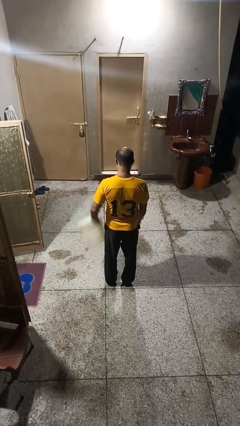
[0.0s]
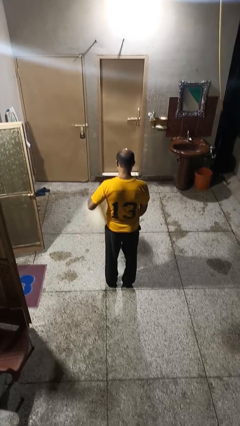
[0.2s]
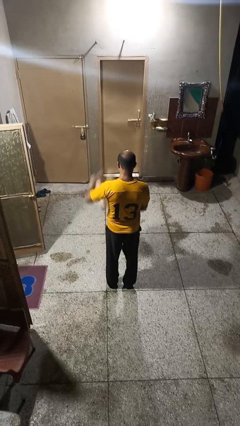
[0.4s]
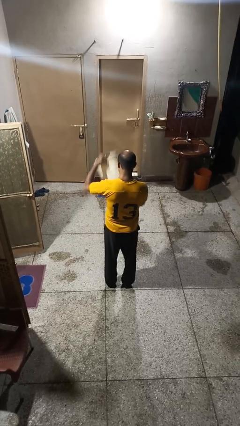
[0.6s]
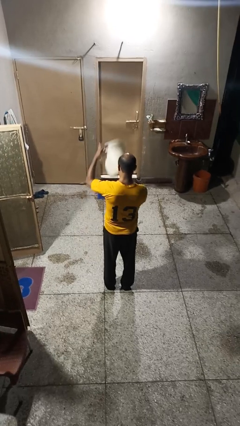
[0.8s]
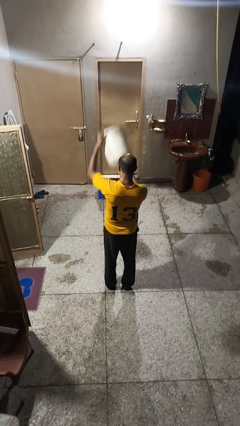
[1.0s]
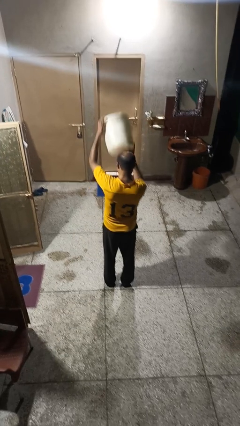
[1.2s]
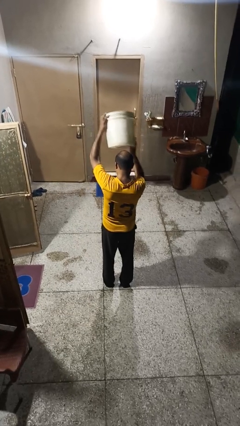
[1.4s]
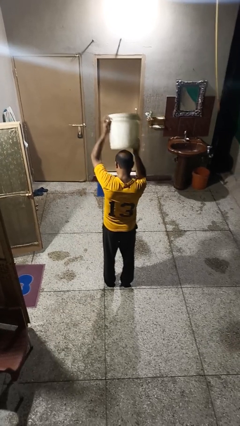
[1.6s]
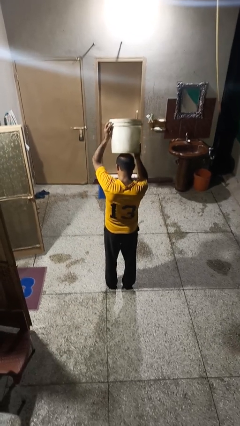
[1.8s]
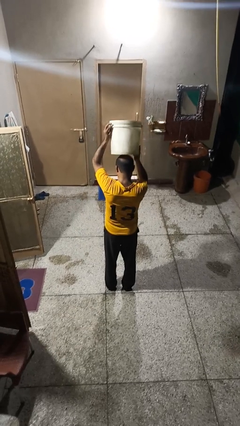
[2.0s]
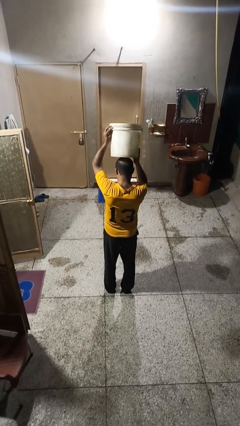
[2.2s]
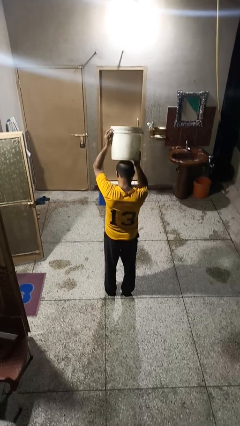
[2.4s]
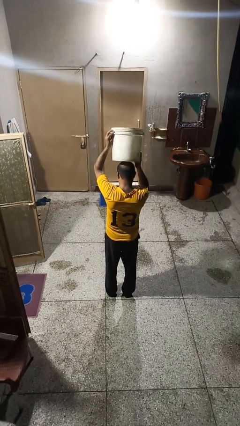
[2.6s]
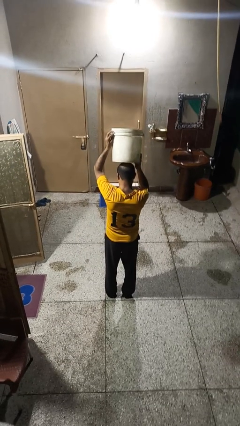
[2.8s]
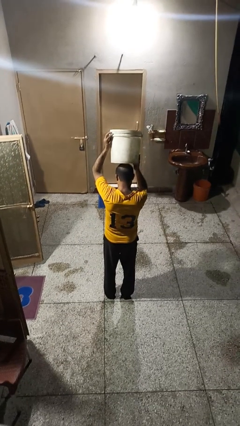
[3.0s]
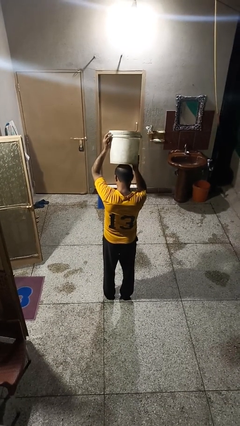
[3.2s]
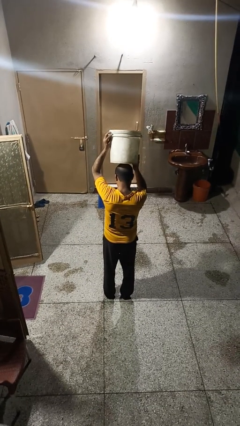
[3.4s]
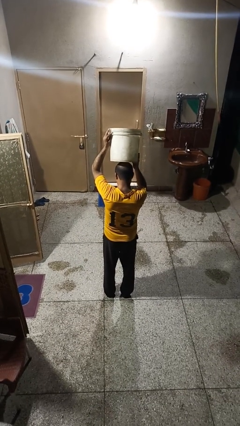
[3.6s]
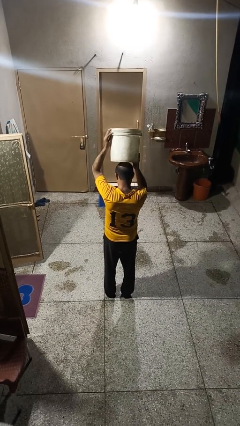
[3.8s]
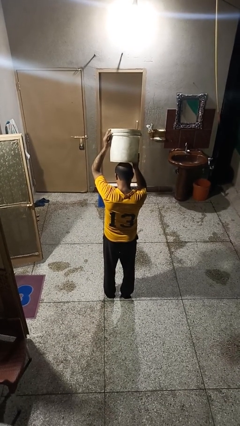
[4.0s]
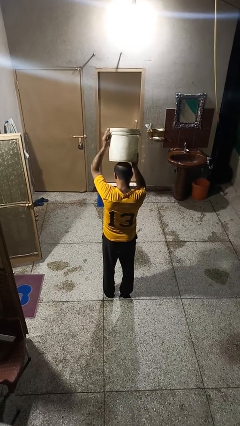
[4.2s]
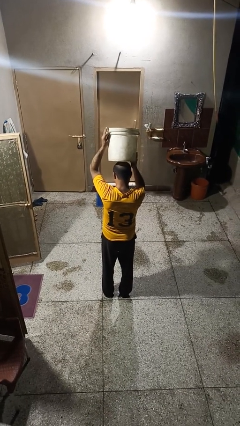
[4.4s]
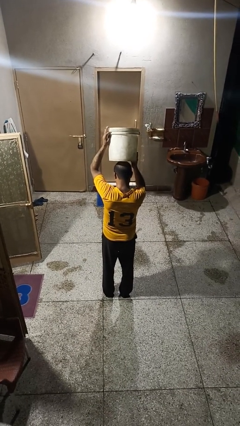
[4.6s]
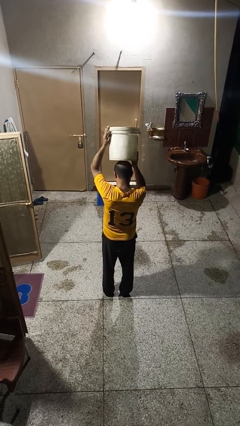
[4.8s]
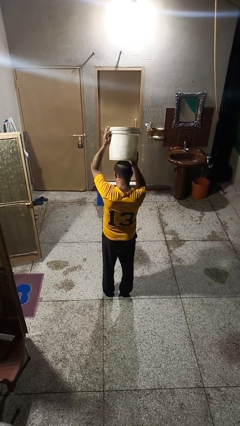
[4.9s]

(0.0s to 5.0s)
person holds object above head

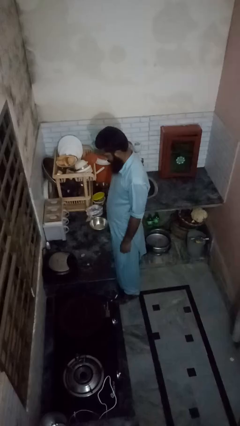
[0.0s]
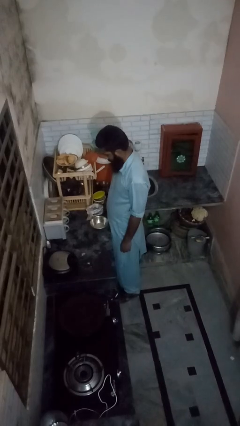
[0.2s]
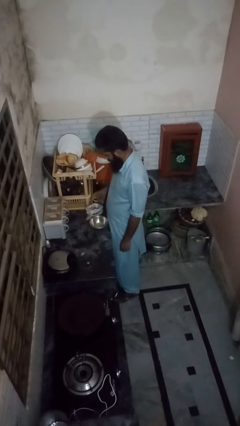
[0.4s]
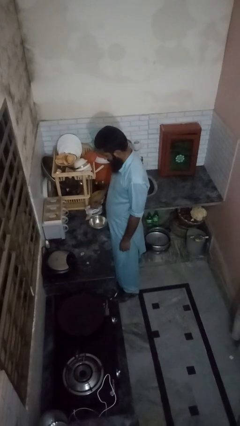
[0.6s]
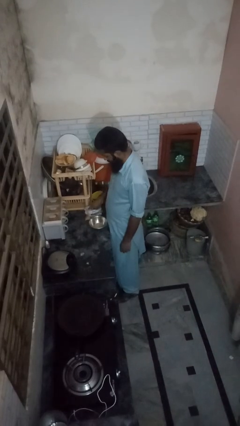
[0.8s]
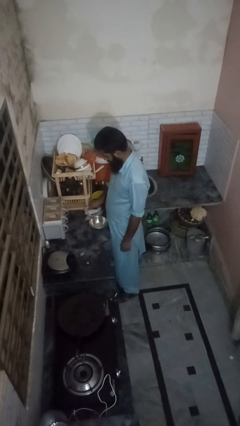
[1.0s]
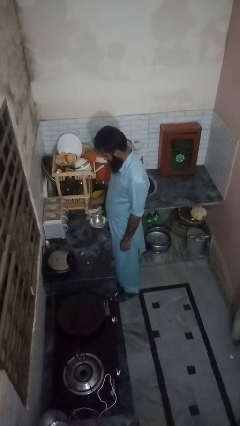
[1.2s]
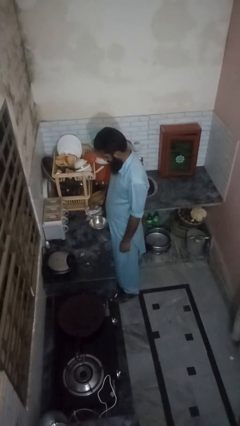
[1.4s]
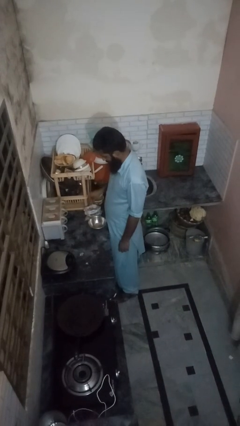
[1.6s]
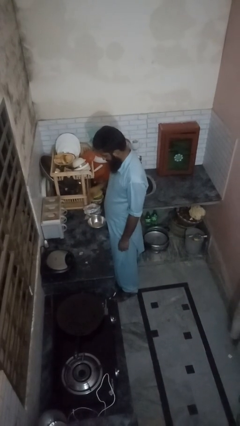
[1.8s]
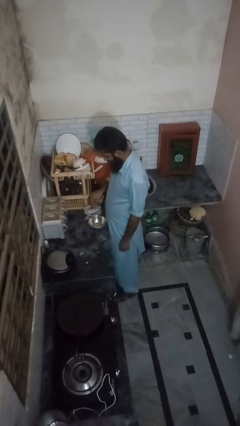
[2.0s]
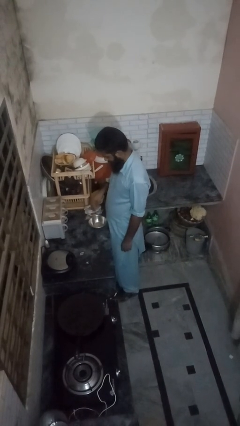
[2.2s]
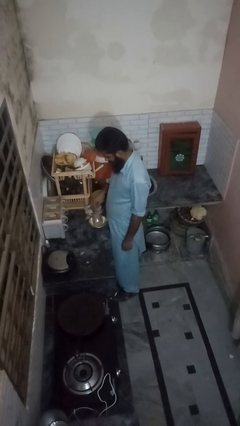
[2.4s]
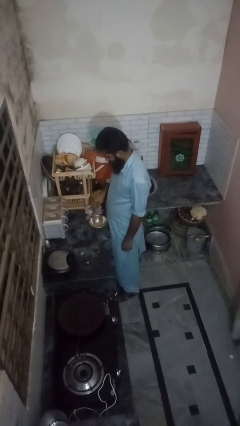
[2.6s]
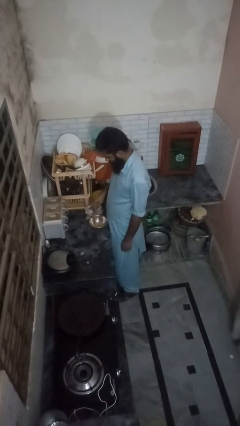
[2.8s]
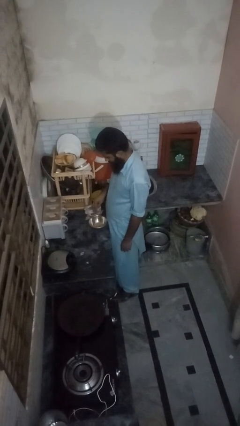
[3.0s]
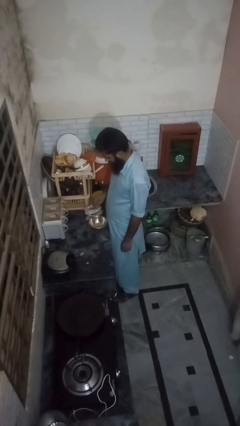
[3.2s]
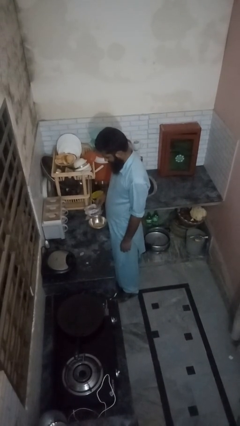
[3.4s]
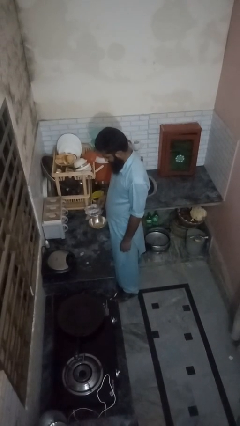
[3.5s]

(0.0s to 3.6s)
person pours into bowl

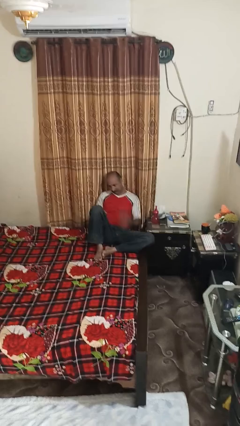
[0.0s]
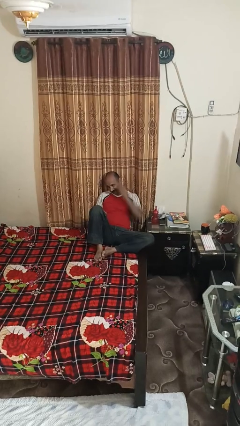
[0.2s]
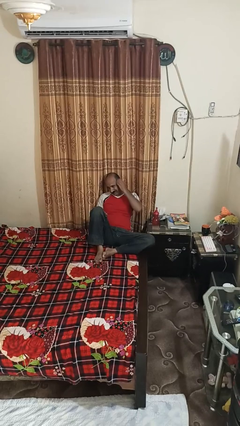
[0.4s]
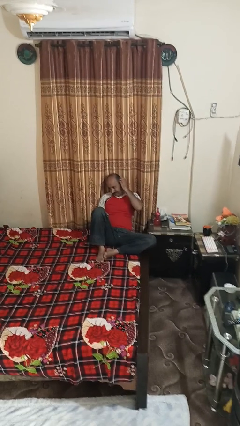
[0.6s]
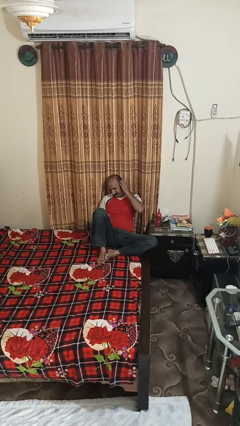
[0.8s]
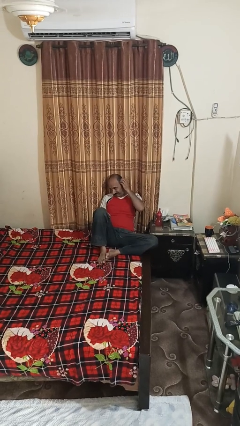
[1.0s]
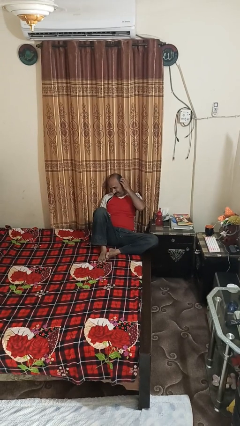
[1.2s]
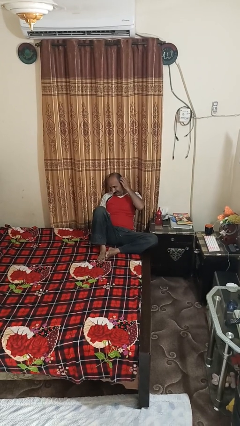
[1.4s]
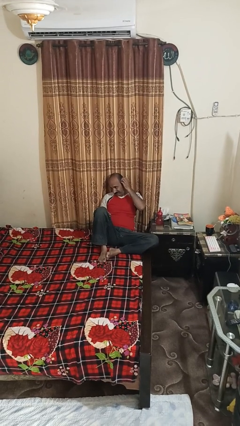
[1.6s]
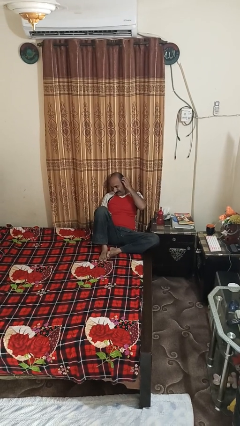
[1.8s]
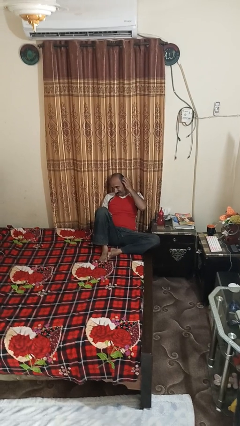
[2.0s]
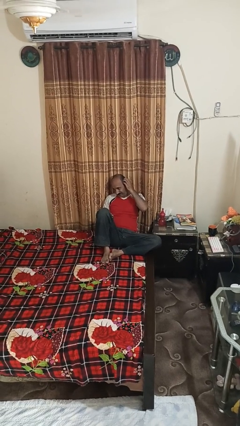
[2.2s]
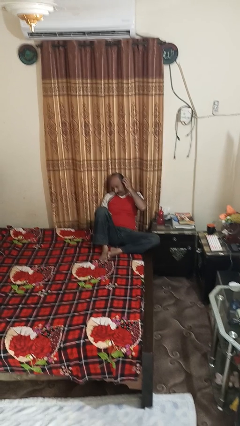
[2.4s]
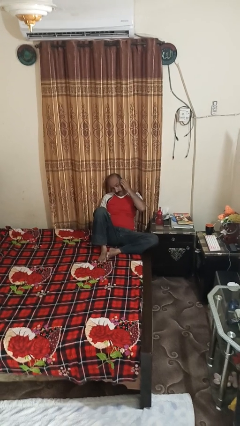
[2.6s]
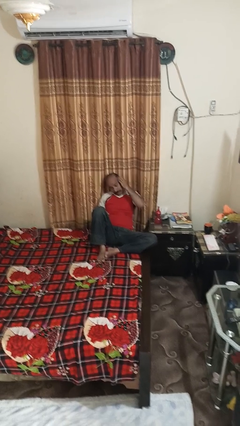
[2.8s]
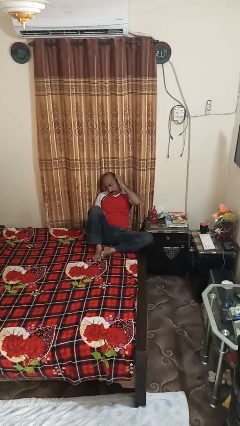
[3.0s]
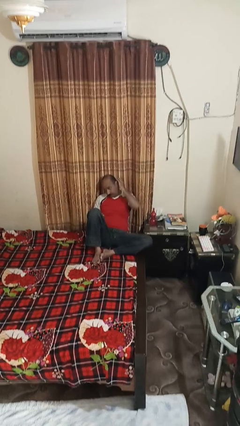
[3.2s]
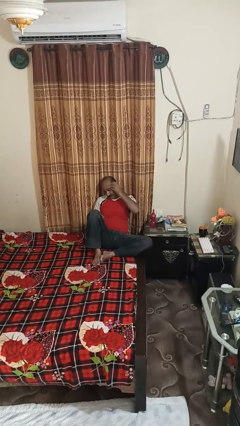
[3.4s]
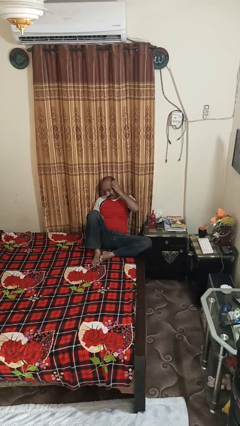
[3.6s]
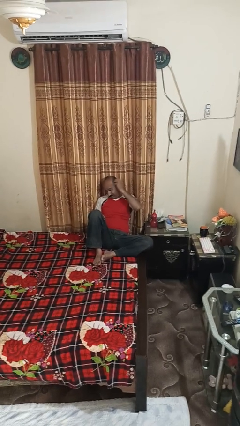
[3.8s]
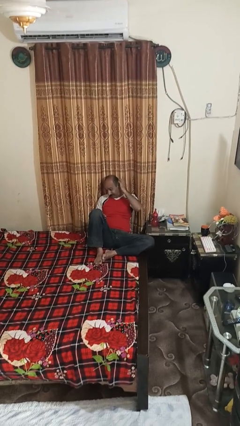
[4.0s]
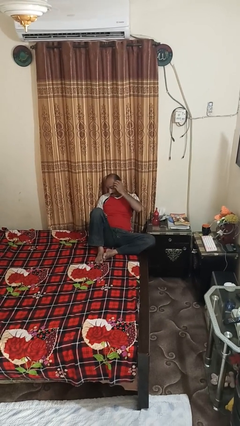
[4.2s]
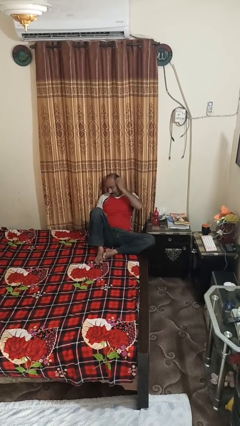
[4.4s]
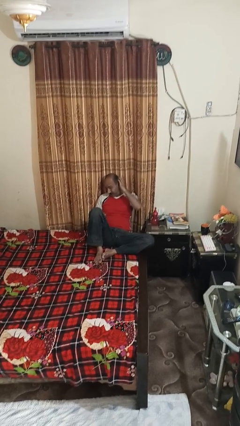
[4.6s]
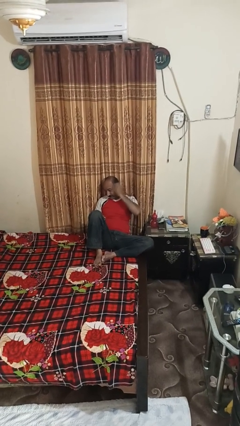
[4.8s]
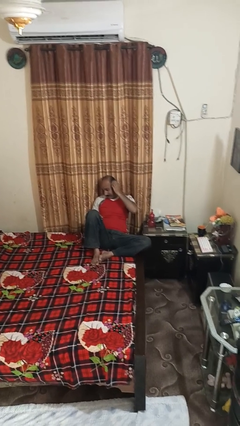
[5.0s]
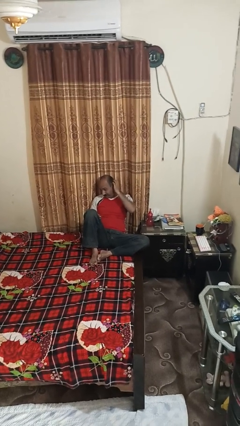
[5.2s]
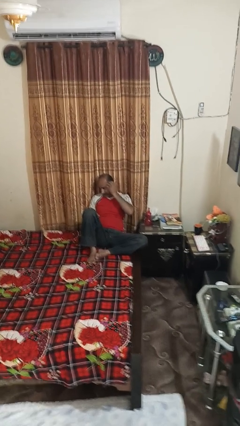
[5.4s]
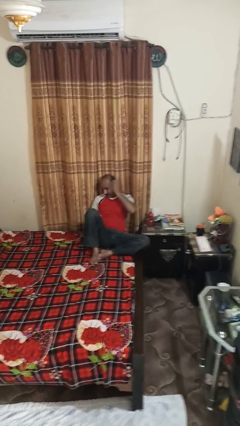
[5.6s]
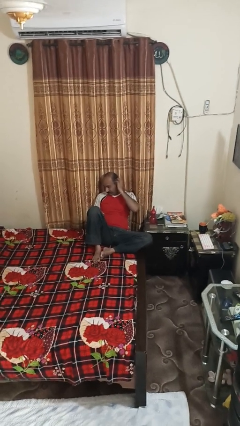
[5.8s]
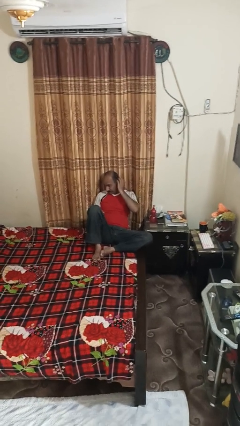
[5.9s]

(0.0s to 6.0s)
person strokes hair

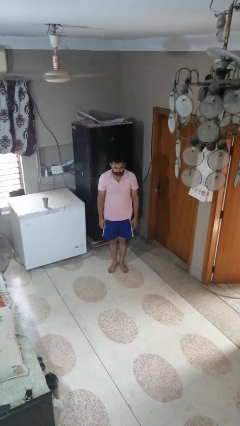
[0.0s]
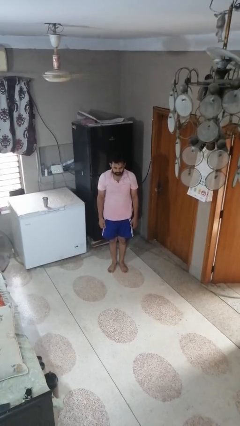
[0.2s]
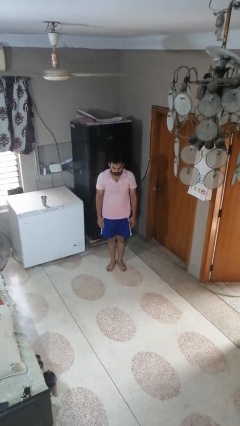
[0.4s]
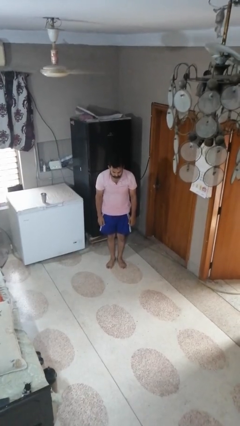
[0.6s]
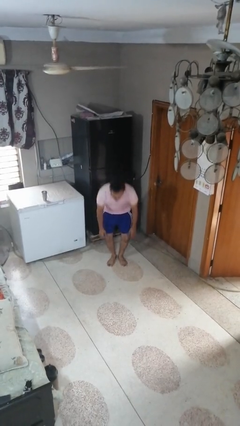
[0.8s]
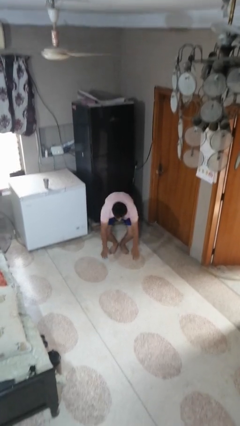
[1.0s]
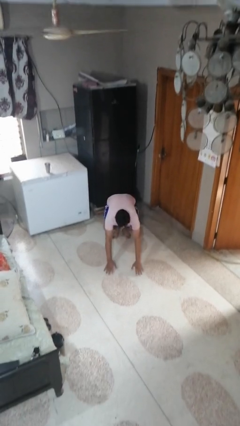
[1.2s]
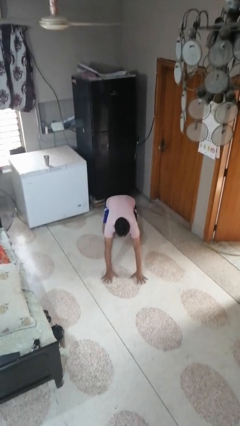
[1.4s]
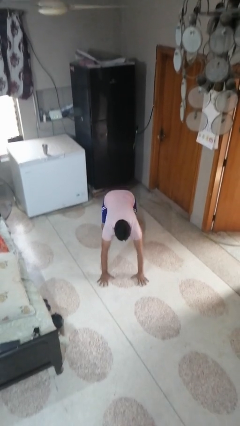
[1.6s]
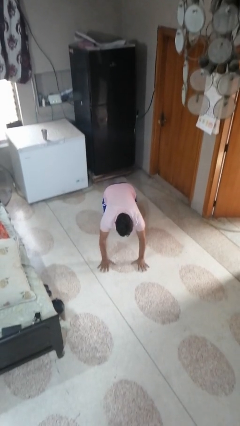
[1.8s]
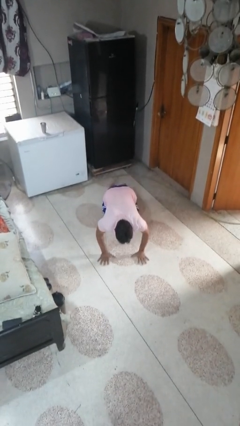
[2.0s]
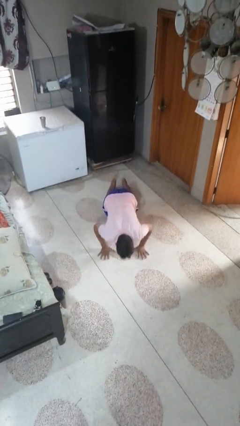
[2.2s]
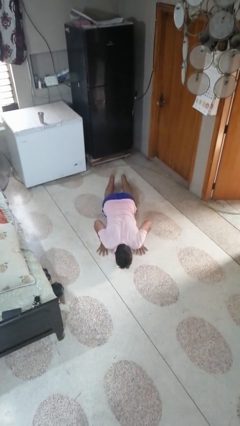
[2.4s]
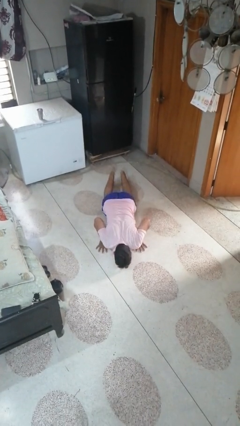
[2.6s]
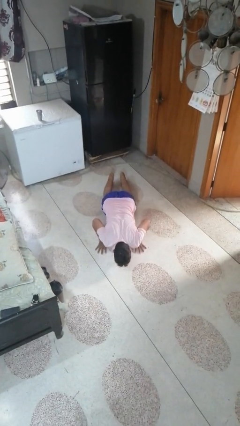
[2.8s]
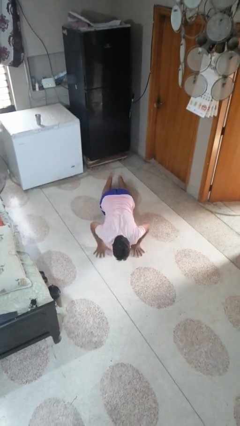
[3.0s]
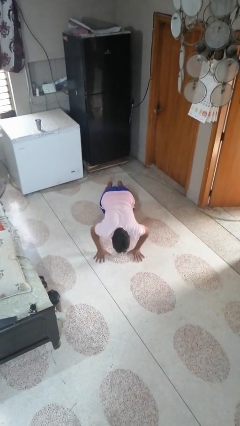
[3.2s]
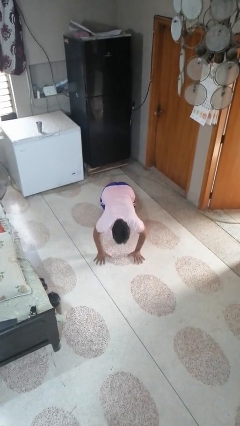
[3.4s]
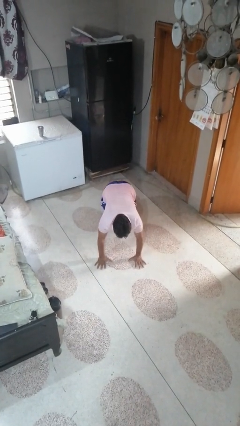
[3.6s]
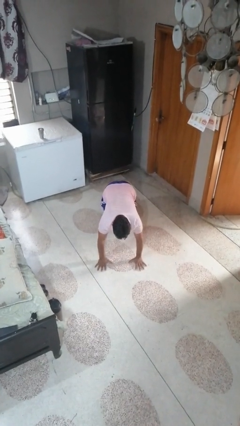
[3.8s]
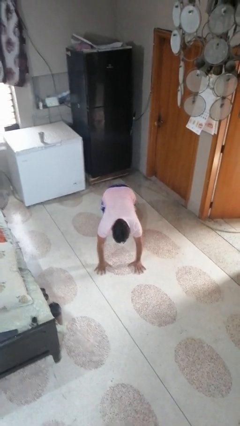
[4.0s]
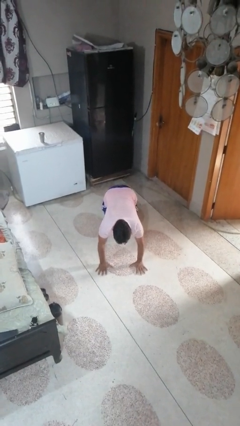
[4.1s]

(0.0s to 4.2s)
person exercises with pushup
